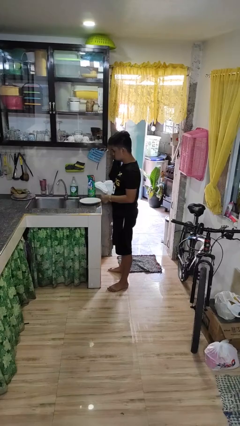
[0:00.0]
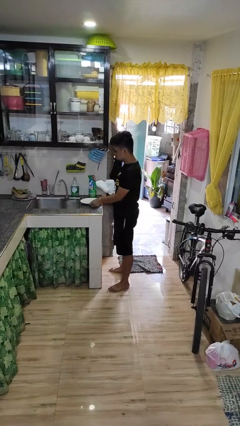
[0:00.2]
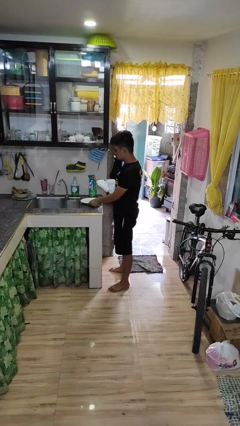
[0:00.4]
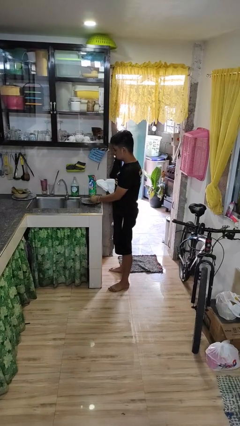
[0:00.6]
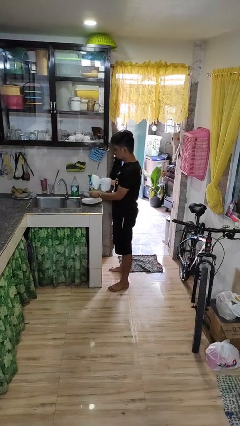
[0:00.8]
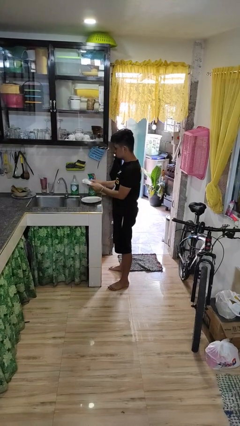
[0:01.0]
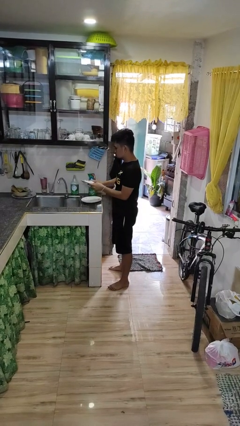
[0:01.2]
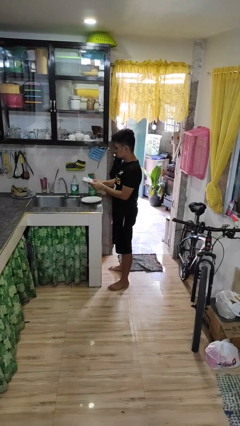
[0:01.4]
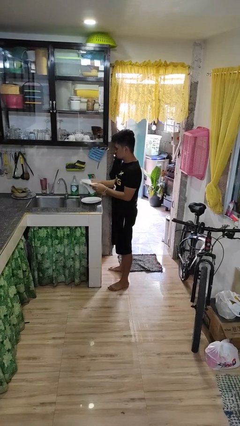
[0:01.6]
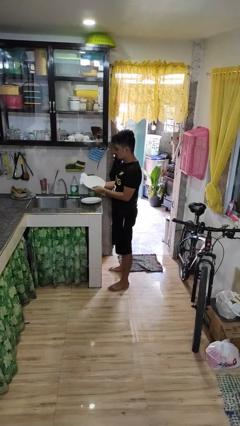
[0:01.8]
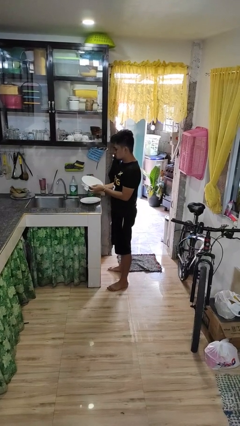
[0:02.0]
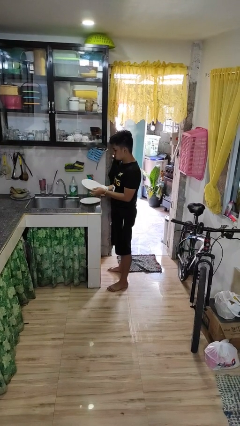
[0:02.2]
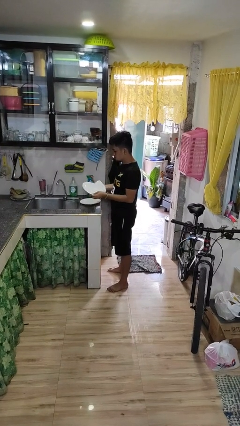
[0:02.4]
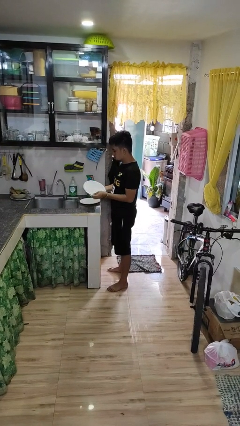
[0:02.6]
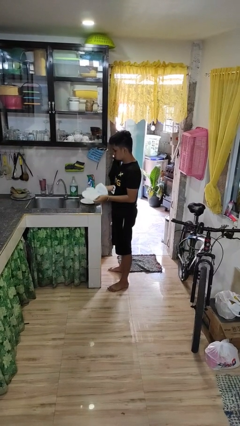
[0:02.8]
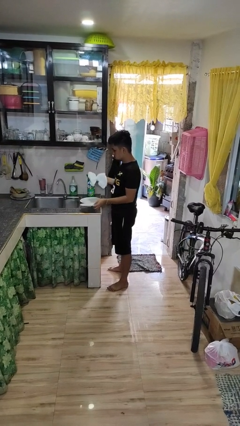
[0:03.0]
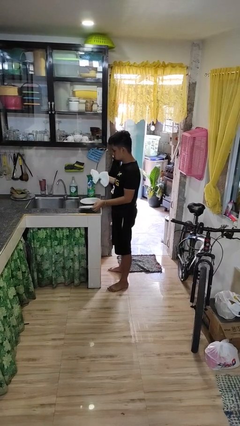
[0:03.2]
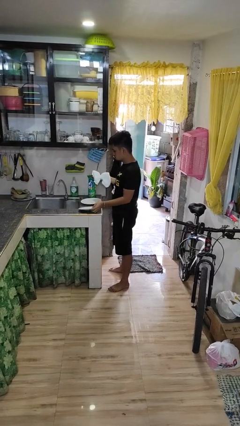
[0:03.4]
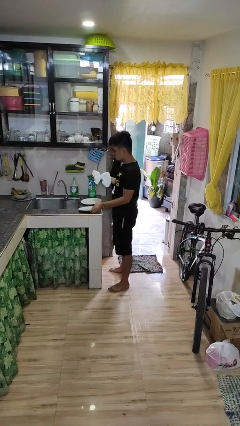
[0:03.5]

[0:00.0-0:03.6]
person dries dish

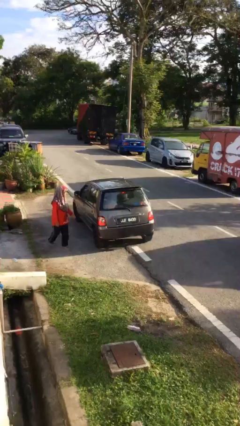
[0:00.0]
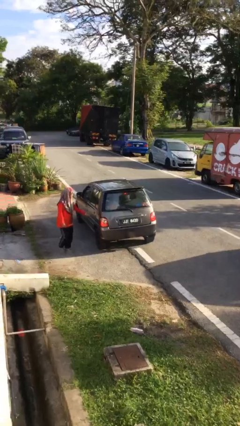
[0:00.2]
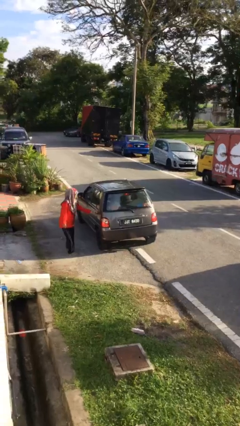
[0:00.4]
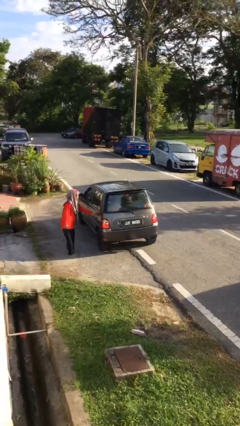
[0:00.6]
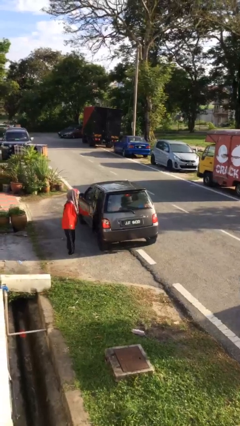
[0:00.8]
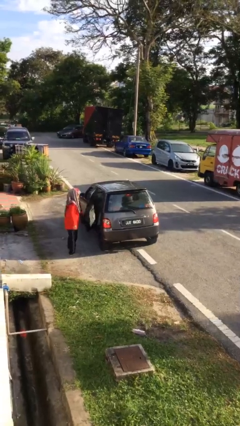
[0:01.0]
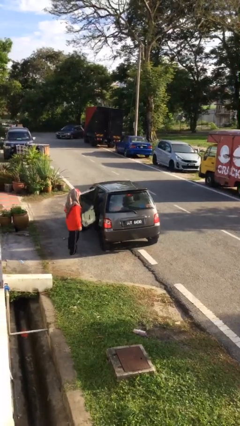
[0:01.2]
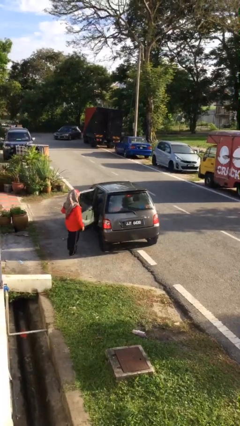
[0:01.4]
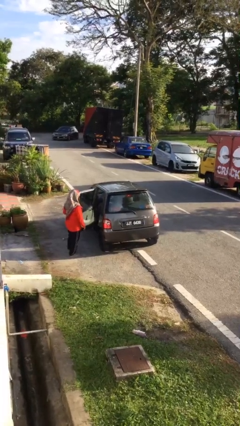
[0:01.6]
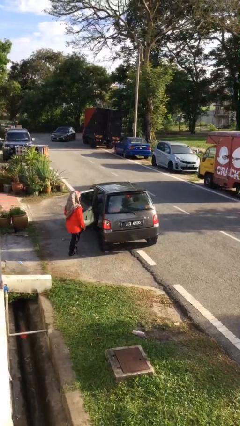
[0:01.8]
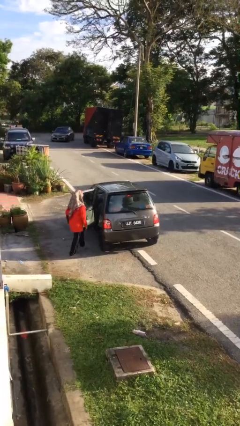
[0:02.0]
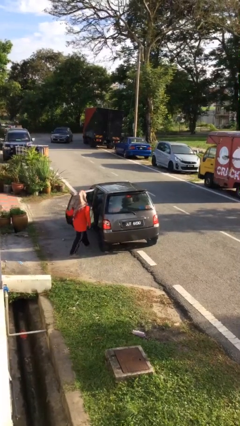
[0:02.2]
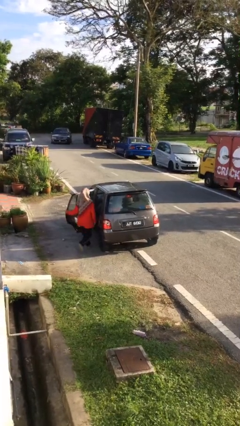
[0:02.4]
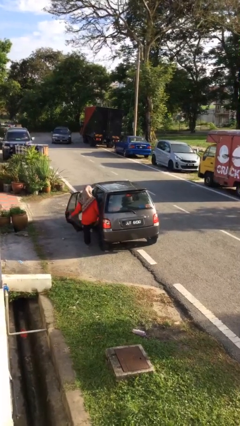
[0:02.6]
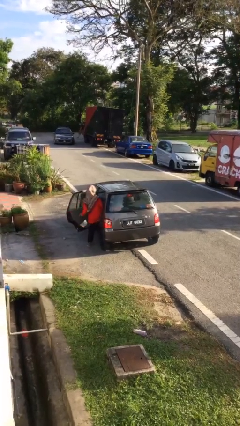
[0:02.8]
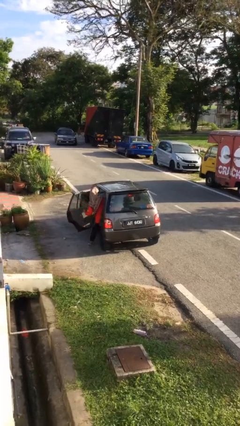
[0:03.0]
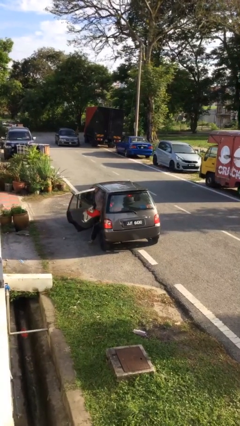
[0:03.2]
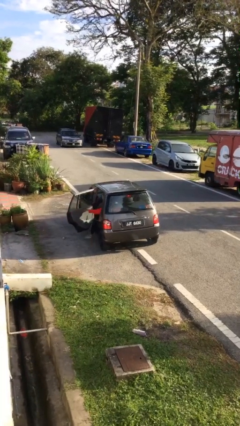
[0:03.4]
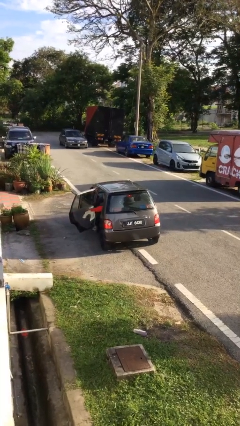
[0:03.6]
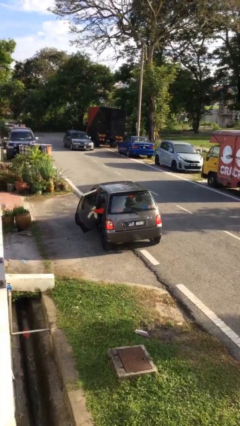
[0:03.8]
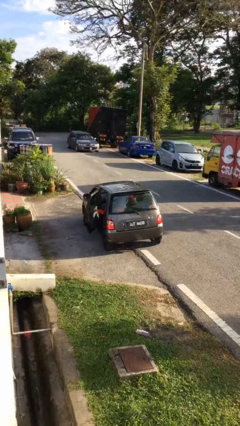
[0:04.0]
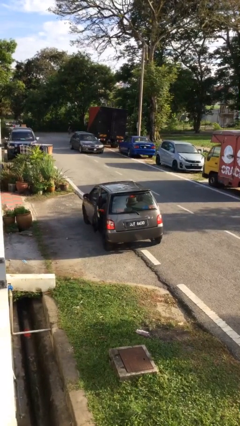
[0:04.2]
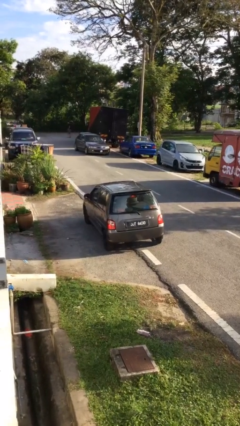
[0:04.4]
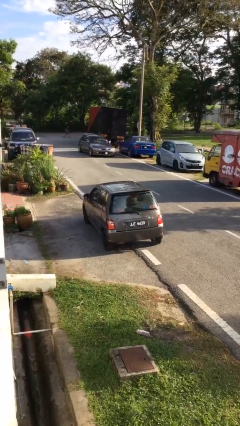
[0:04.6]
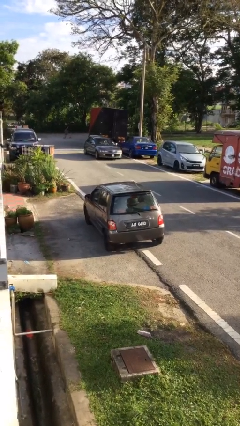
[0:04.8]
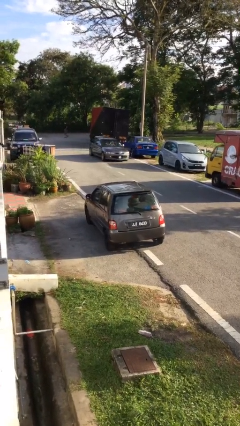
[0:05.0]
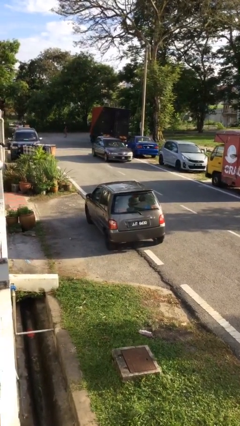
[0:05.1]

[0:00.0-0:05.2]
car picks up person

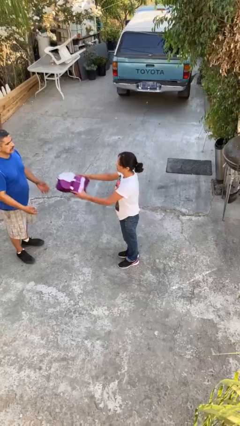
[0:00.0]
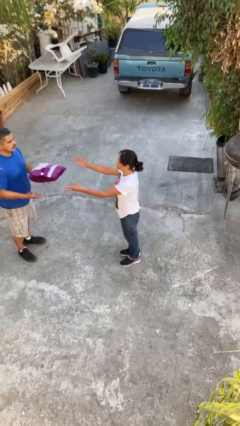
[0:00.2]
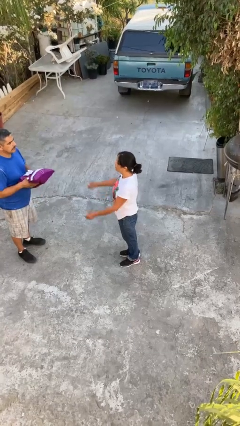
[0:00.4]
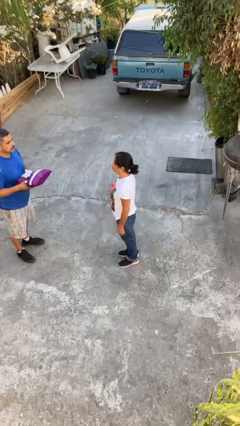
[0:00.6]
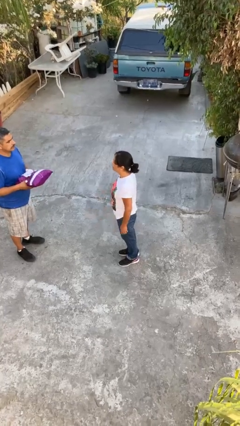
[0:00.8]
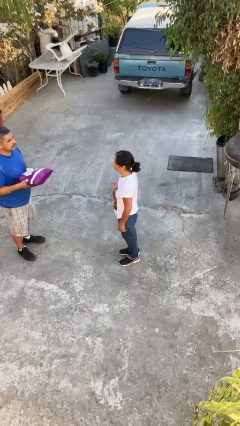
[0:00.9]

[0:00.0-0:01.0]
person throws object to person

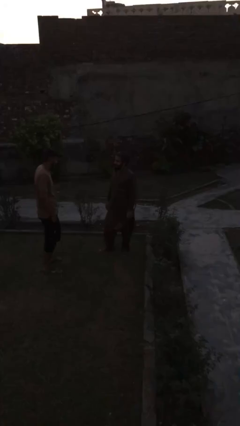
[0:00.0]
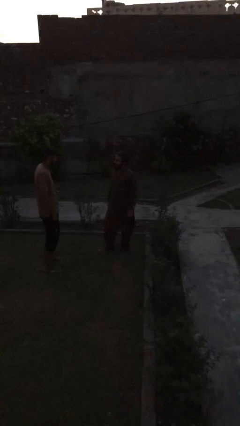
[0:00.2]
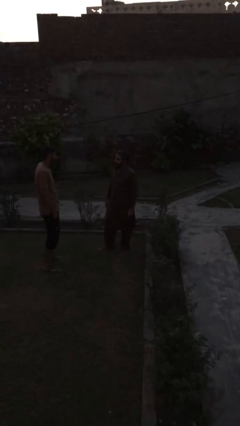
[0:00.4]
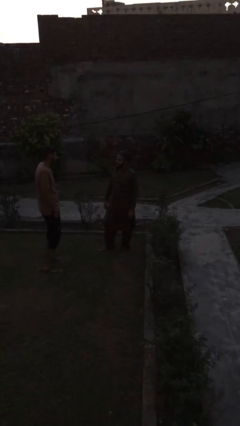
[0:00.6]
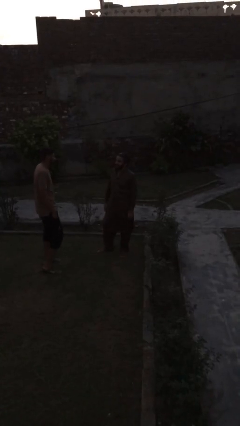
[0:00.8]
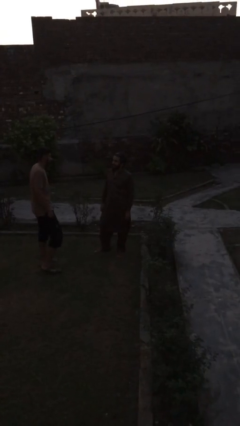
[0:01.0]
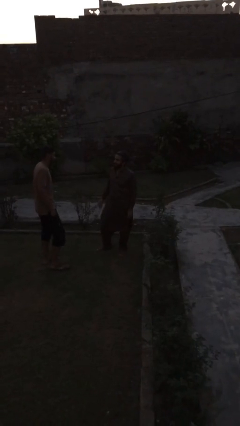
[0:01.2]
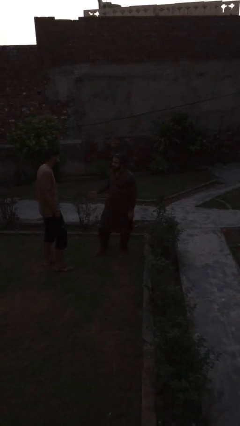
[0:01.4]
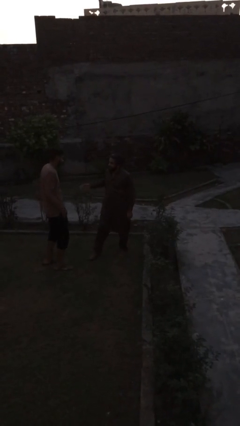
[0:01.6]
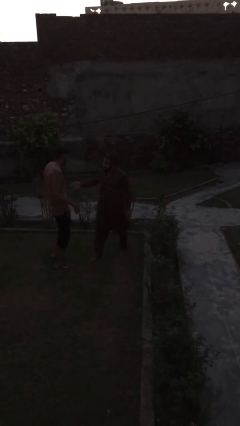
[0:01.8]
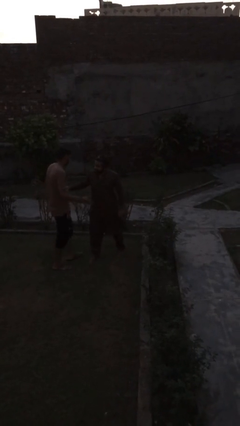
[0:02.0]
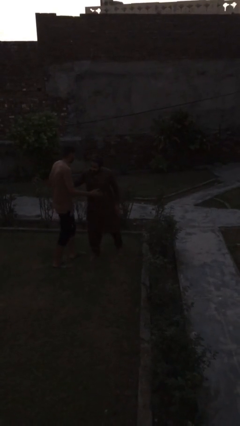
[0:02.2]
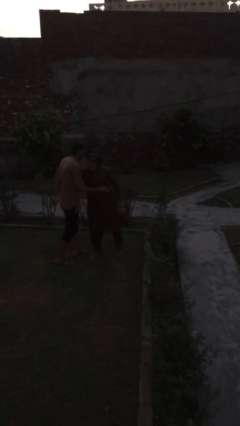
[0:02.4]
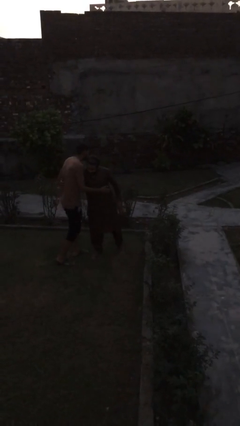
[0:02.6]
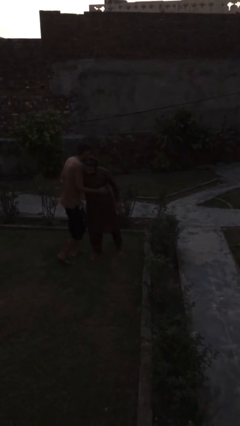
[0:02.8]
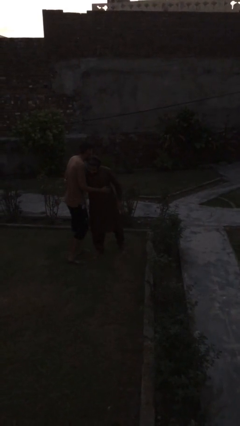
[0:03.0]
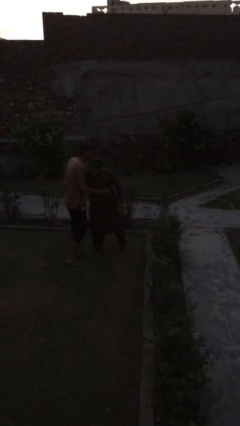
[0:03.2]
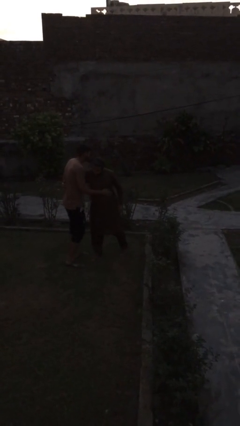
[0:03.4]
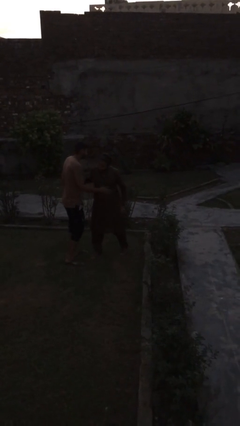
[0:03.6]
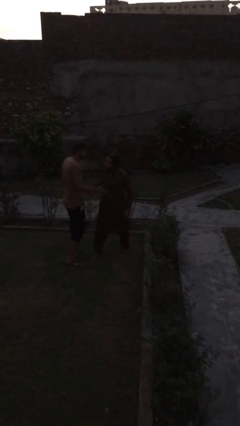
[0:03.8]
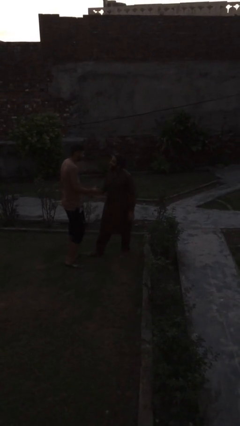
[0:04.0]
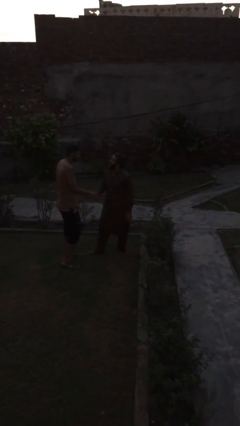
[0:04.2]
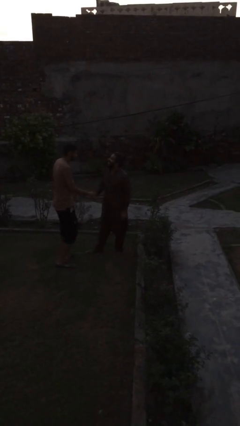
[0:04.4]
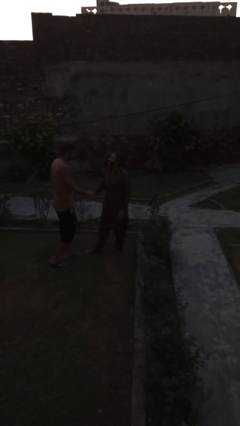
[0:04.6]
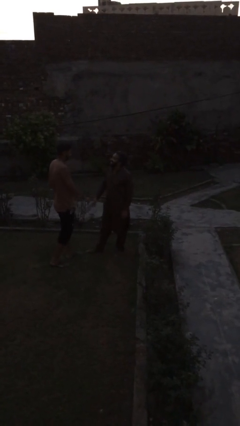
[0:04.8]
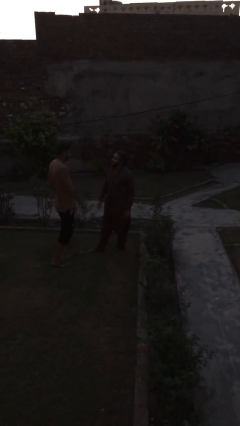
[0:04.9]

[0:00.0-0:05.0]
person embraces person

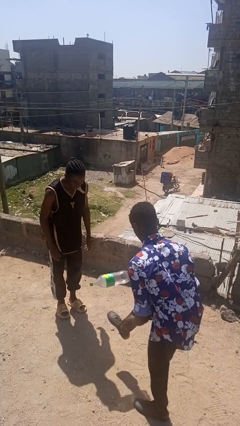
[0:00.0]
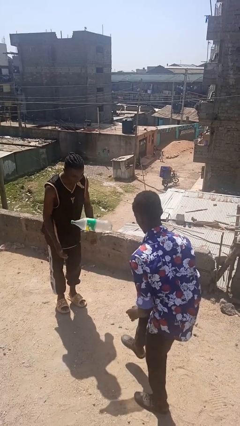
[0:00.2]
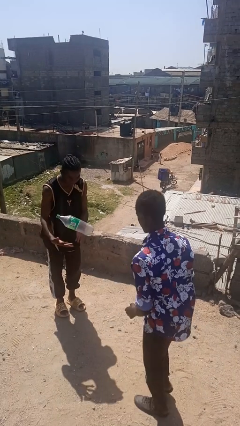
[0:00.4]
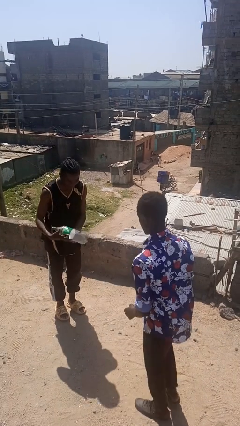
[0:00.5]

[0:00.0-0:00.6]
person kicks object to person

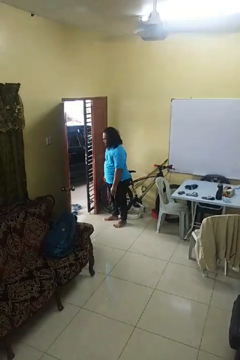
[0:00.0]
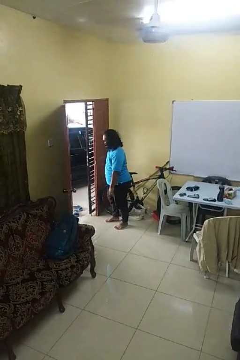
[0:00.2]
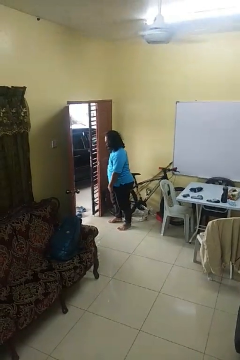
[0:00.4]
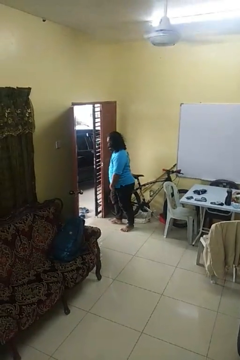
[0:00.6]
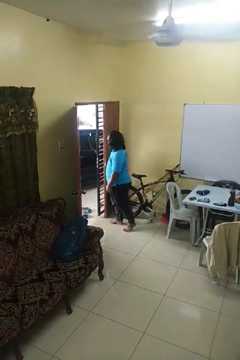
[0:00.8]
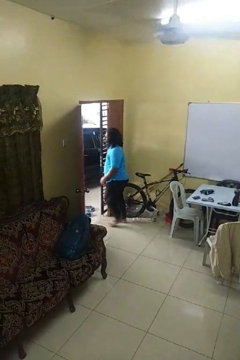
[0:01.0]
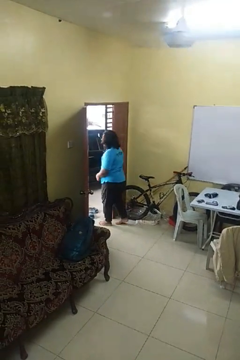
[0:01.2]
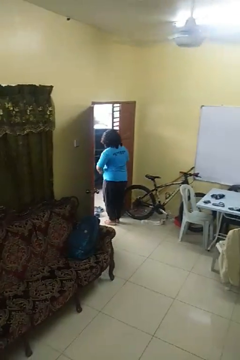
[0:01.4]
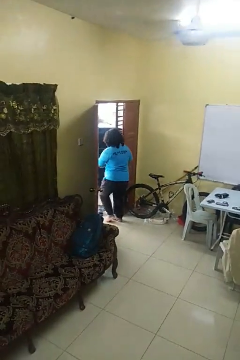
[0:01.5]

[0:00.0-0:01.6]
person bumps into wall

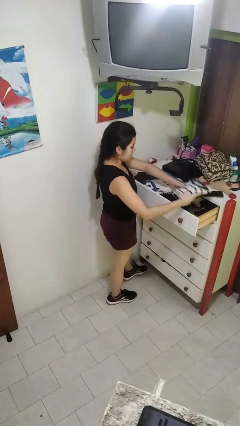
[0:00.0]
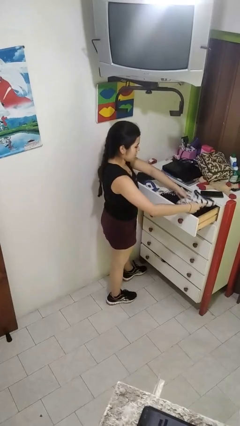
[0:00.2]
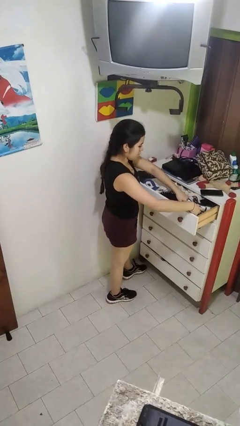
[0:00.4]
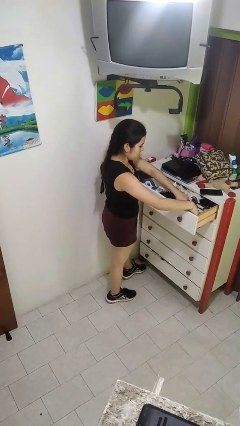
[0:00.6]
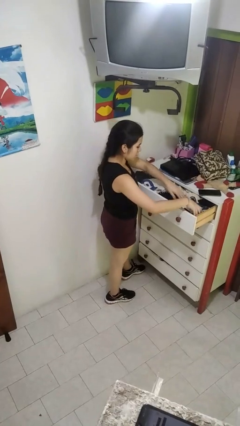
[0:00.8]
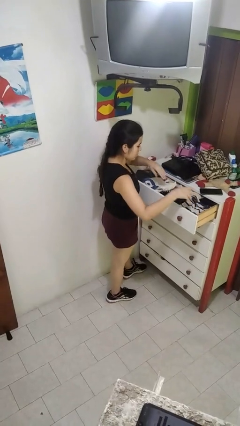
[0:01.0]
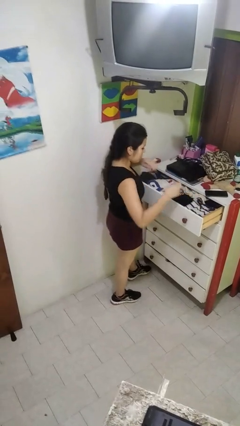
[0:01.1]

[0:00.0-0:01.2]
person puts clothes into dresser
